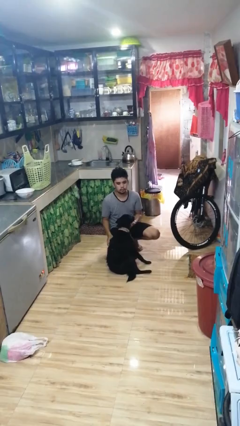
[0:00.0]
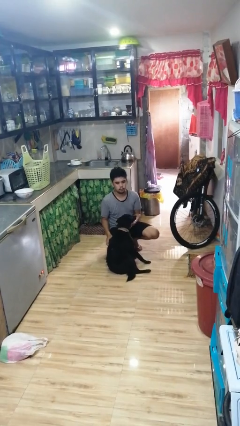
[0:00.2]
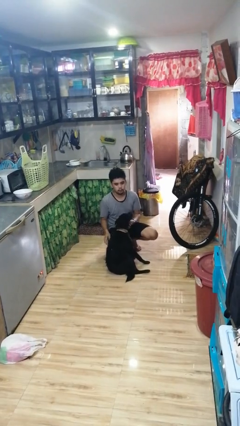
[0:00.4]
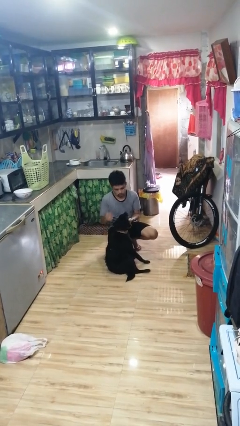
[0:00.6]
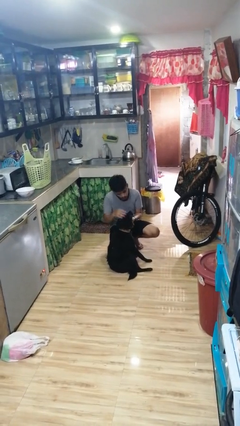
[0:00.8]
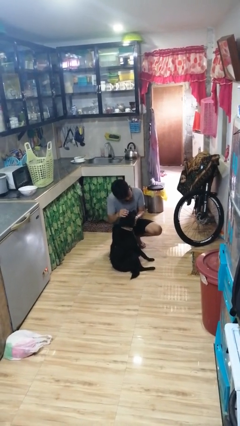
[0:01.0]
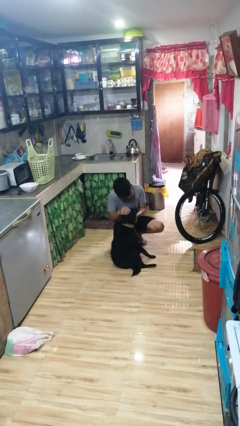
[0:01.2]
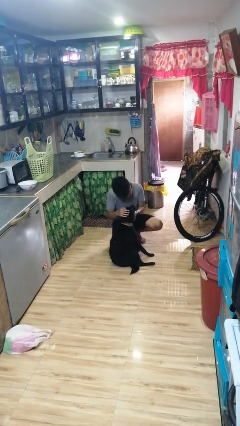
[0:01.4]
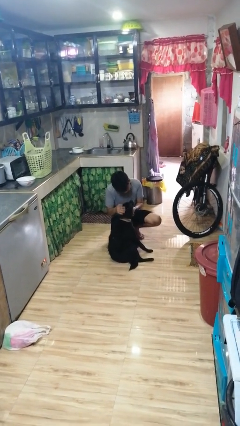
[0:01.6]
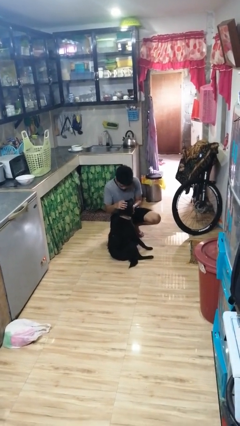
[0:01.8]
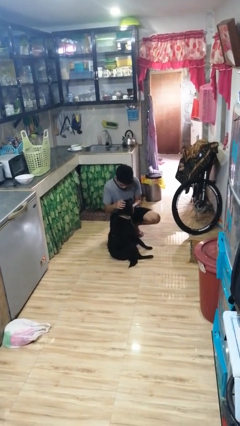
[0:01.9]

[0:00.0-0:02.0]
person pets dog

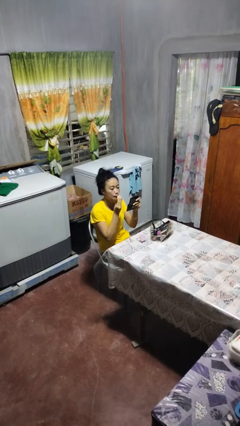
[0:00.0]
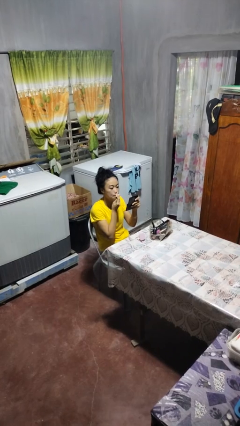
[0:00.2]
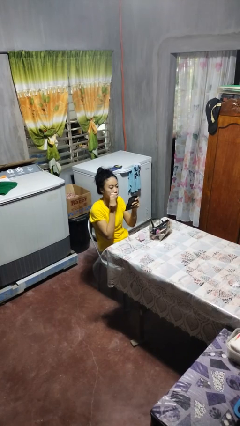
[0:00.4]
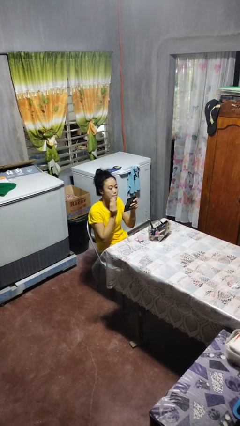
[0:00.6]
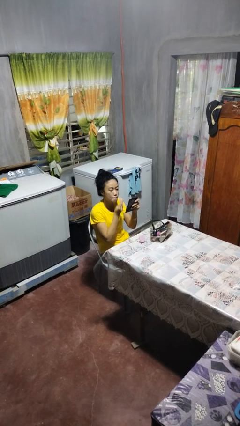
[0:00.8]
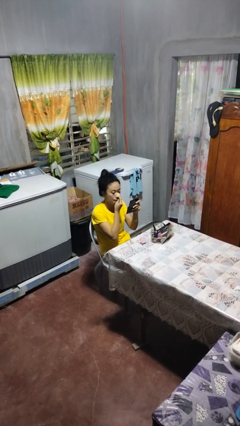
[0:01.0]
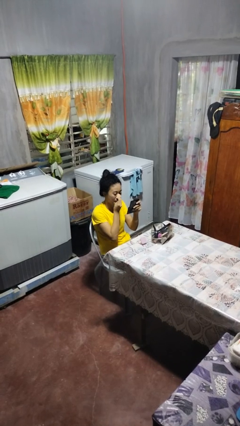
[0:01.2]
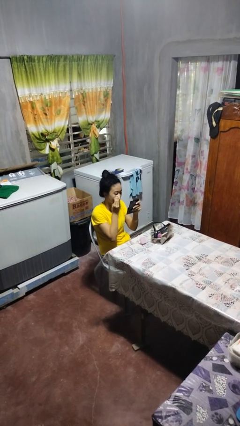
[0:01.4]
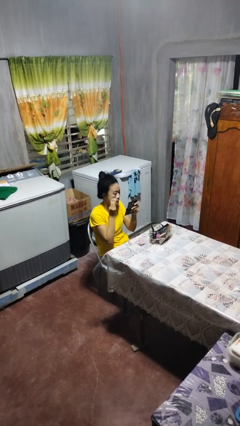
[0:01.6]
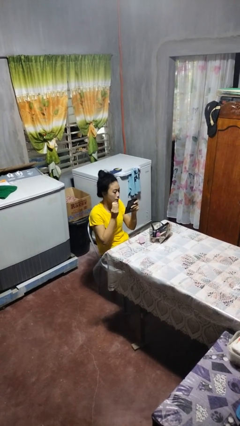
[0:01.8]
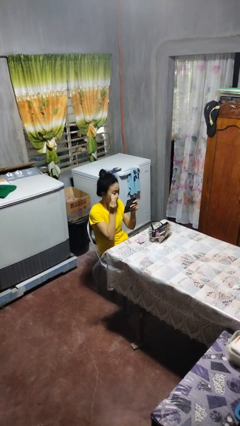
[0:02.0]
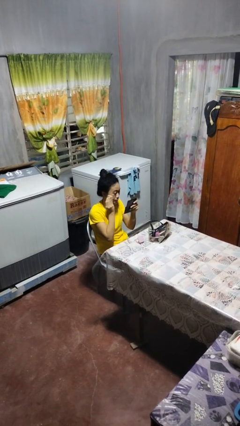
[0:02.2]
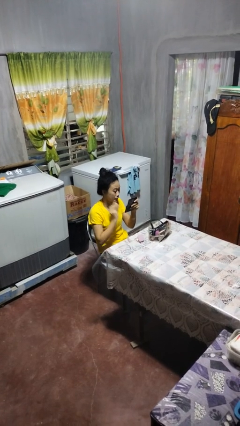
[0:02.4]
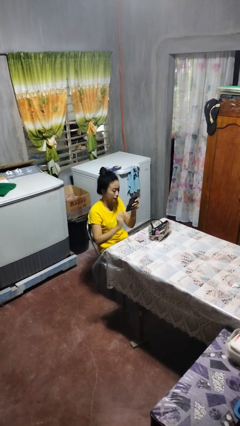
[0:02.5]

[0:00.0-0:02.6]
person applies foundation makeup

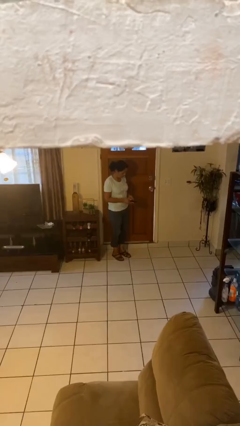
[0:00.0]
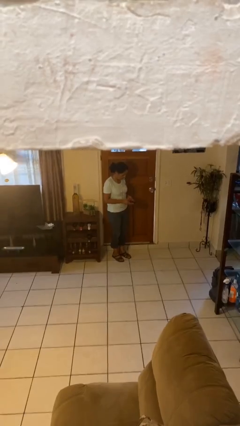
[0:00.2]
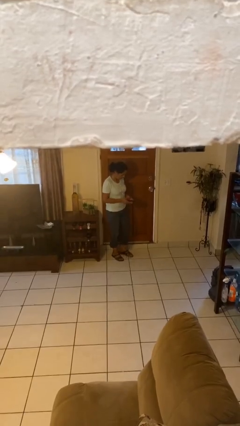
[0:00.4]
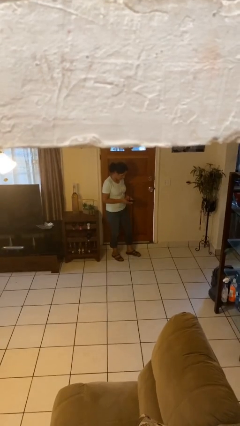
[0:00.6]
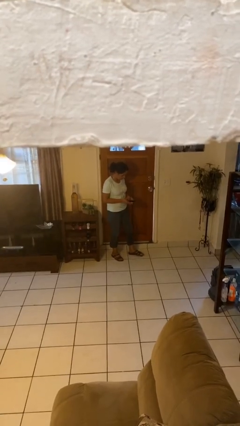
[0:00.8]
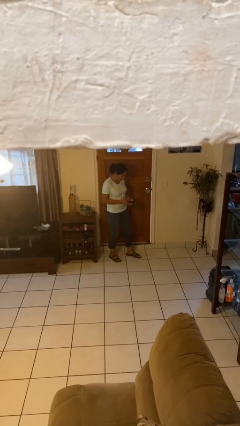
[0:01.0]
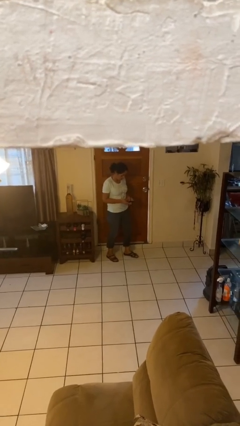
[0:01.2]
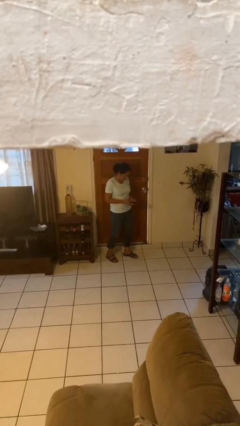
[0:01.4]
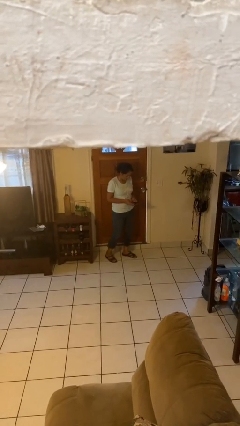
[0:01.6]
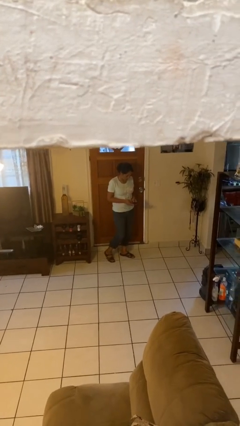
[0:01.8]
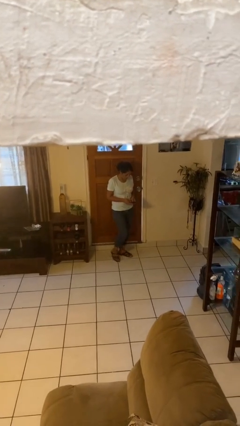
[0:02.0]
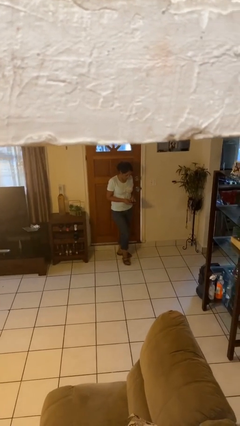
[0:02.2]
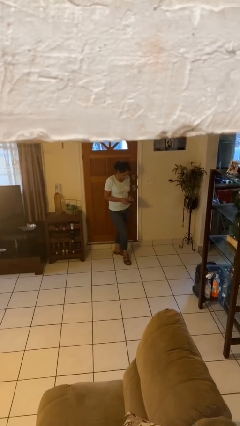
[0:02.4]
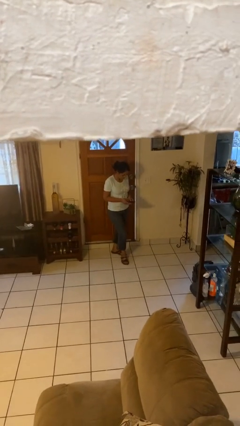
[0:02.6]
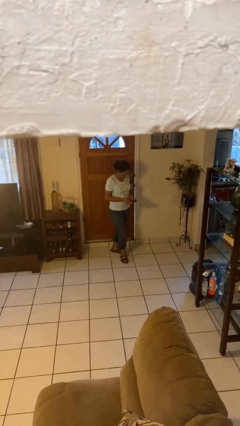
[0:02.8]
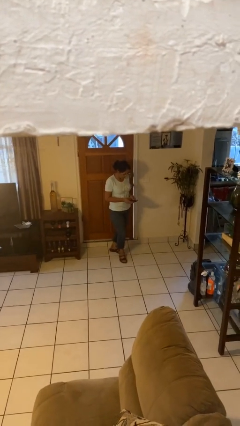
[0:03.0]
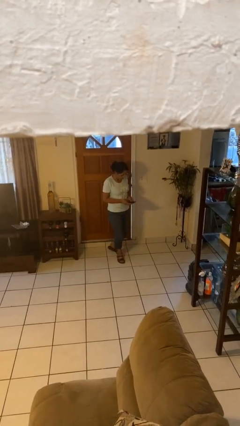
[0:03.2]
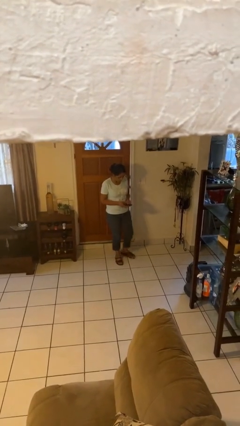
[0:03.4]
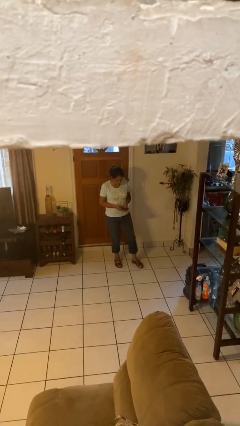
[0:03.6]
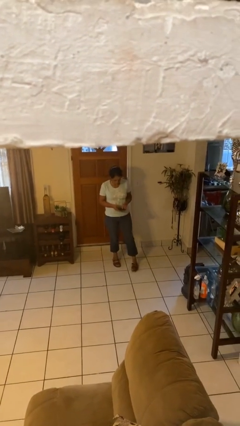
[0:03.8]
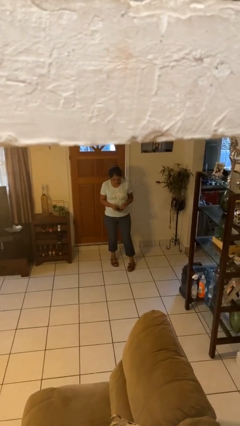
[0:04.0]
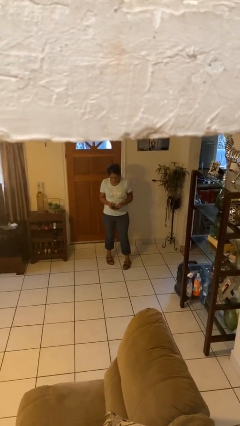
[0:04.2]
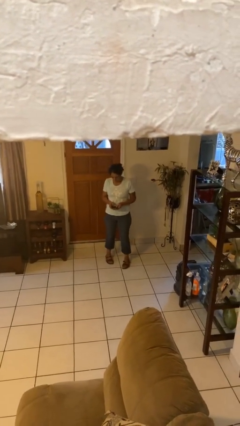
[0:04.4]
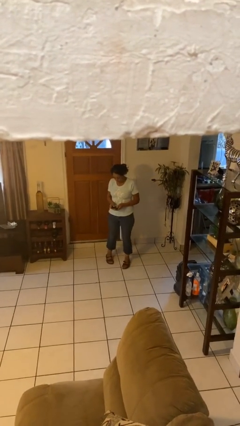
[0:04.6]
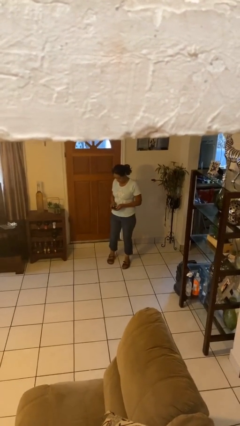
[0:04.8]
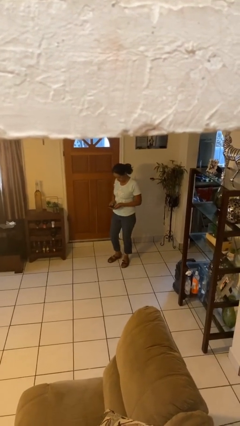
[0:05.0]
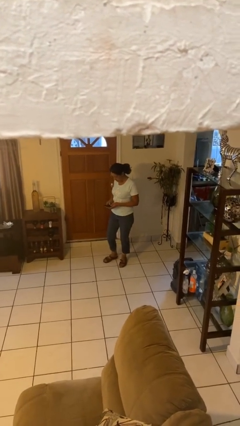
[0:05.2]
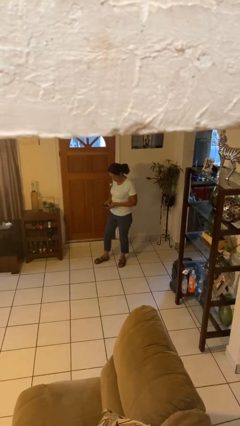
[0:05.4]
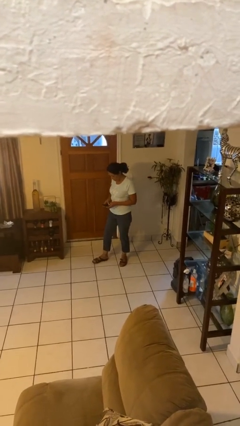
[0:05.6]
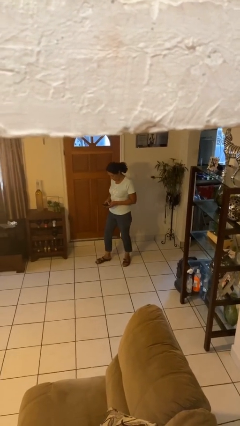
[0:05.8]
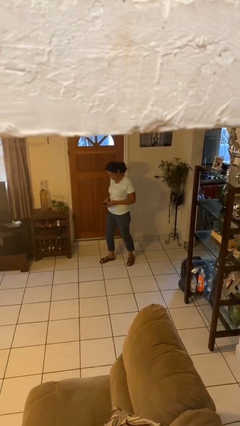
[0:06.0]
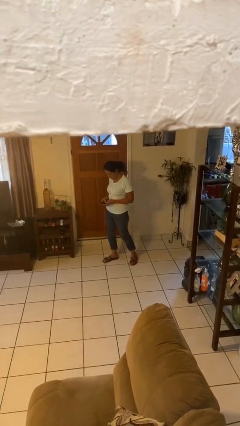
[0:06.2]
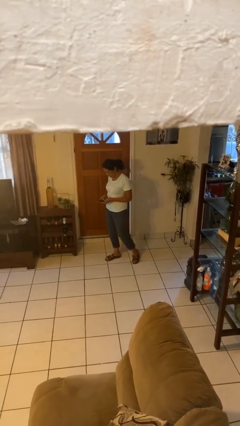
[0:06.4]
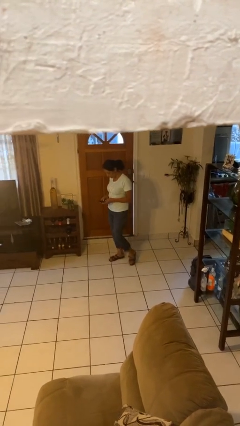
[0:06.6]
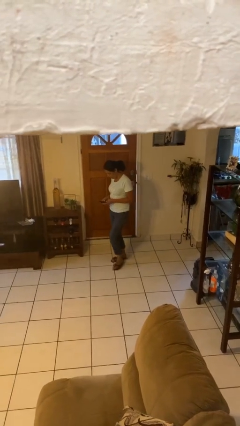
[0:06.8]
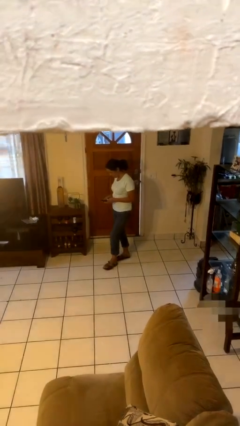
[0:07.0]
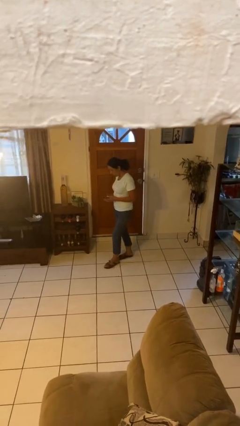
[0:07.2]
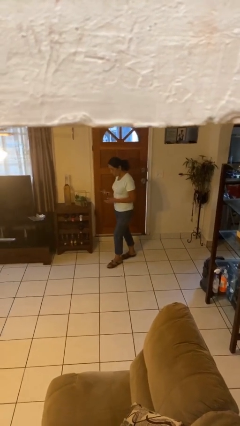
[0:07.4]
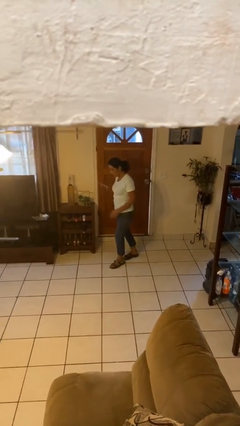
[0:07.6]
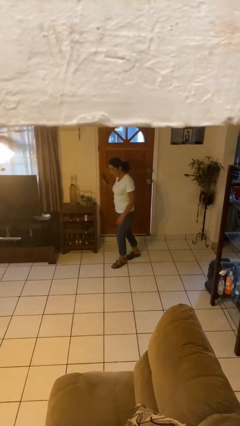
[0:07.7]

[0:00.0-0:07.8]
person texts on phone

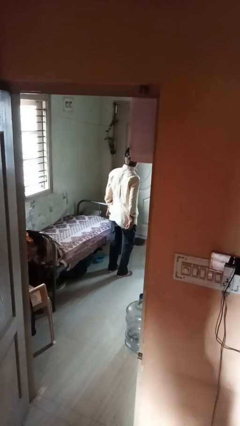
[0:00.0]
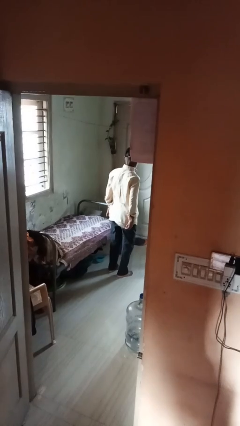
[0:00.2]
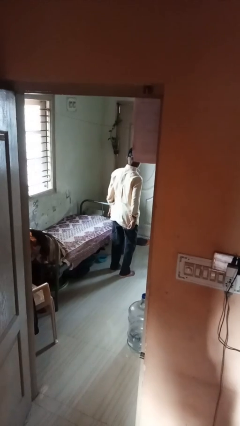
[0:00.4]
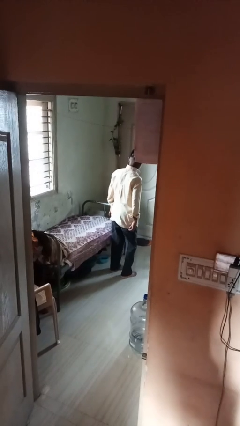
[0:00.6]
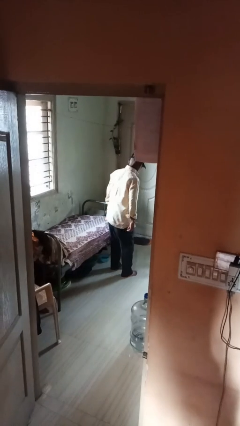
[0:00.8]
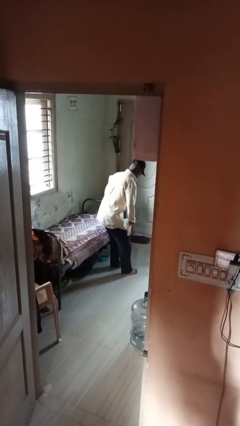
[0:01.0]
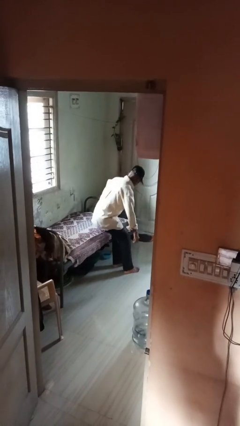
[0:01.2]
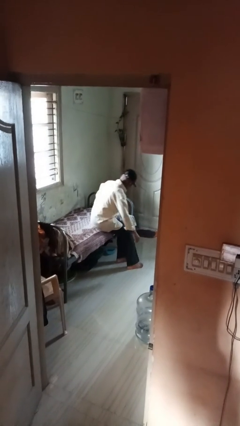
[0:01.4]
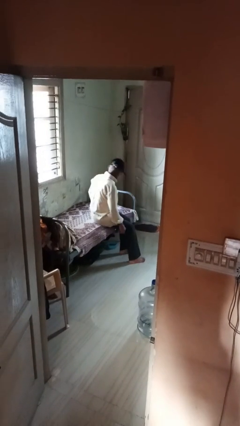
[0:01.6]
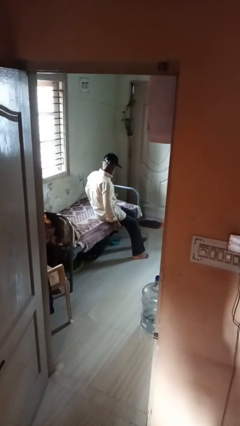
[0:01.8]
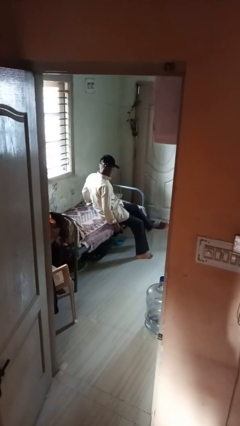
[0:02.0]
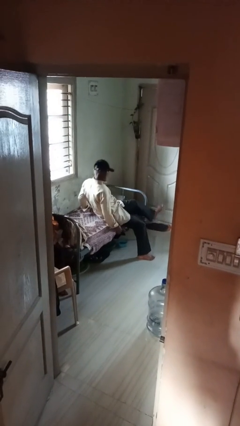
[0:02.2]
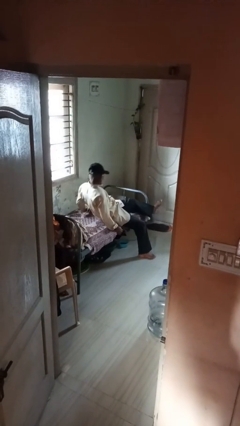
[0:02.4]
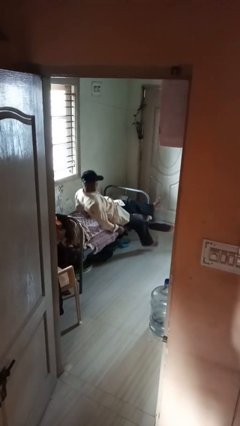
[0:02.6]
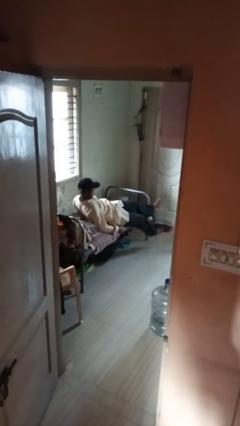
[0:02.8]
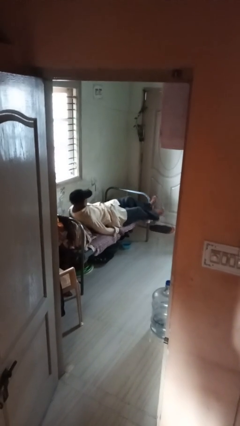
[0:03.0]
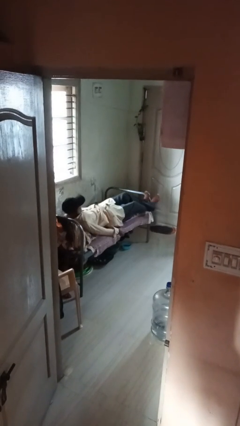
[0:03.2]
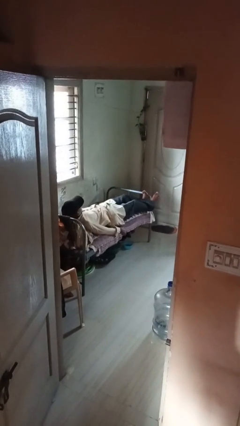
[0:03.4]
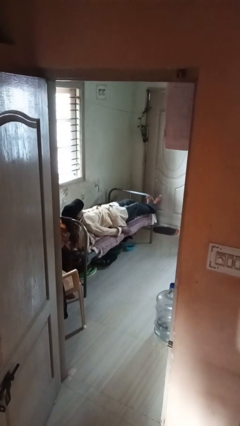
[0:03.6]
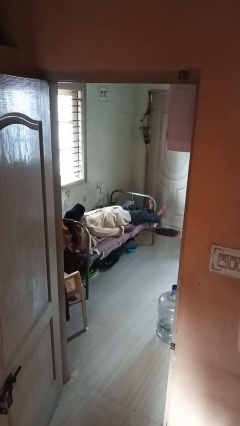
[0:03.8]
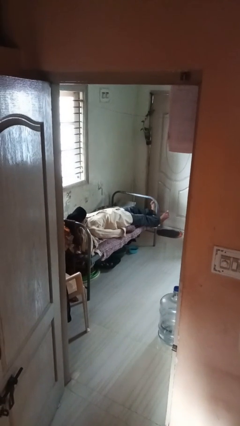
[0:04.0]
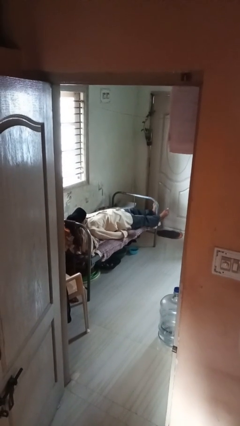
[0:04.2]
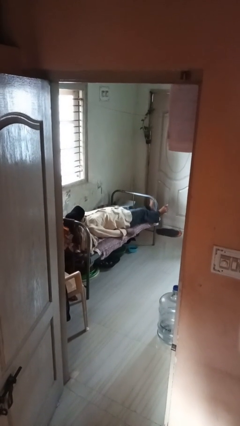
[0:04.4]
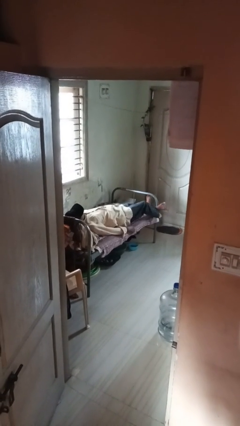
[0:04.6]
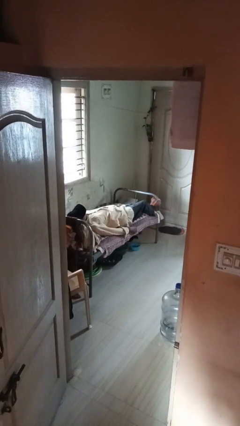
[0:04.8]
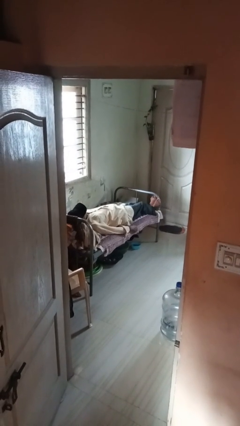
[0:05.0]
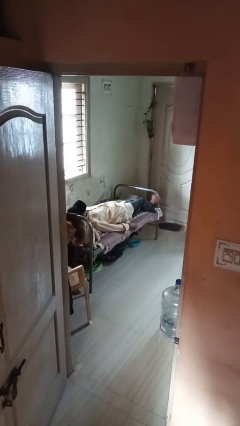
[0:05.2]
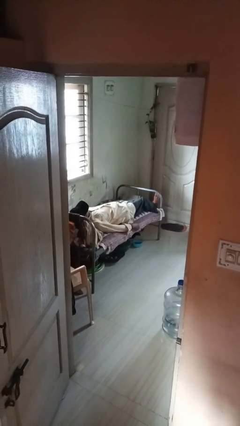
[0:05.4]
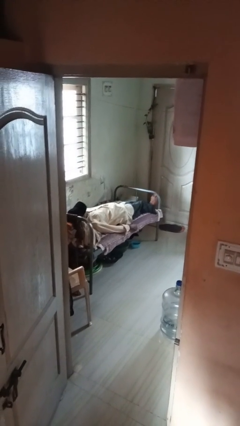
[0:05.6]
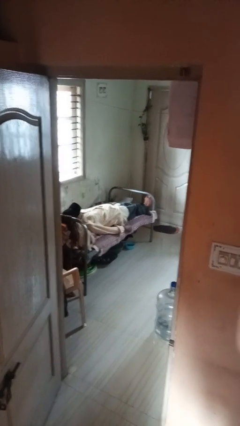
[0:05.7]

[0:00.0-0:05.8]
person lies down on bed
